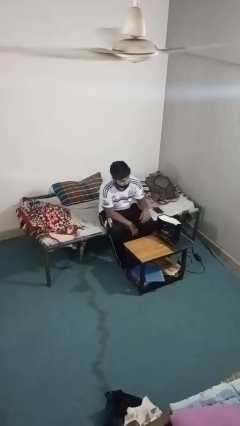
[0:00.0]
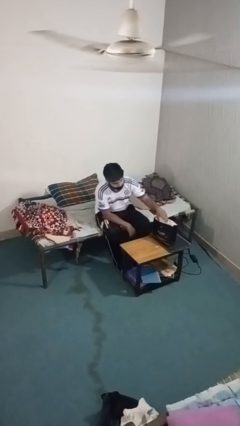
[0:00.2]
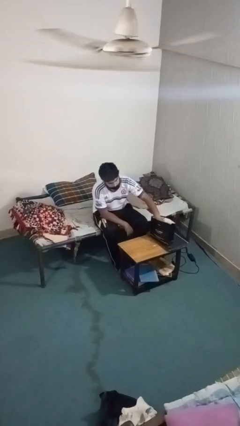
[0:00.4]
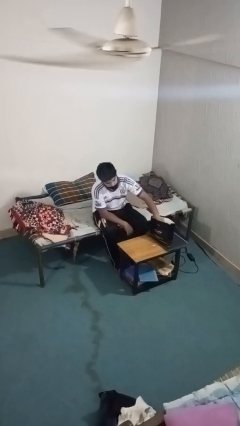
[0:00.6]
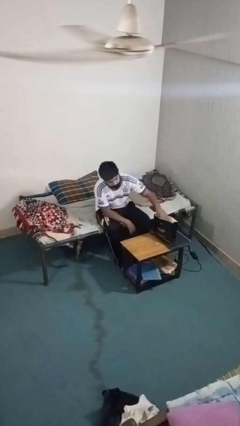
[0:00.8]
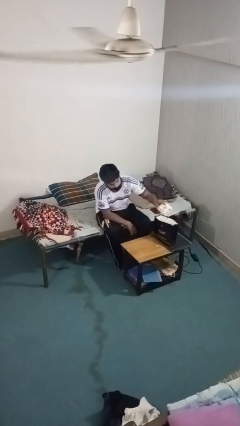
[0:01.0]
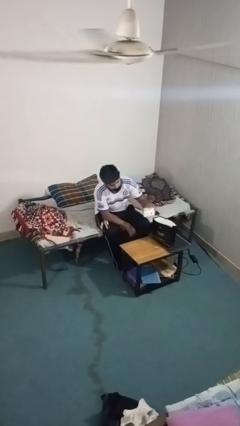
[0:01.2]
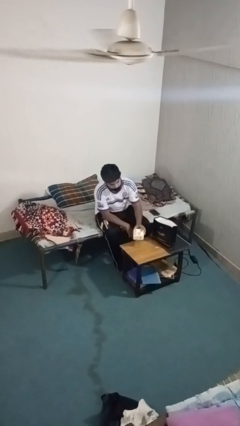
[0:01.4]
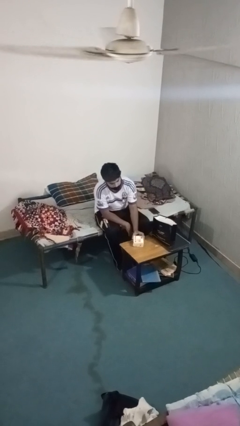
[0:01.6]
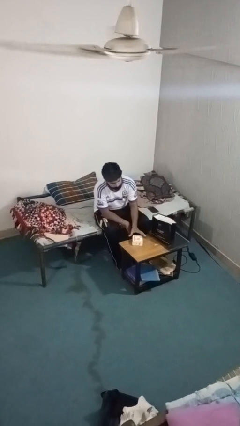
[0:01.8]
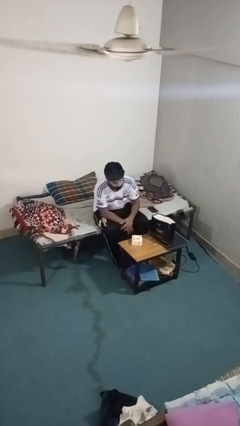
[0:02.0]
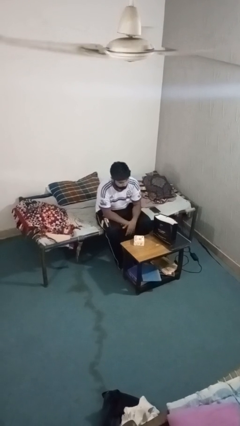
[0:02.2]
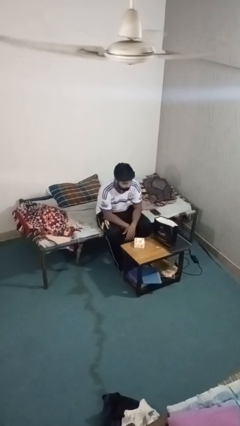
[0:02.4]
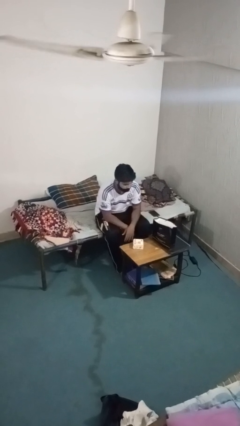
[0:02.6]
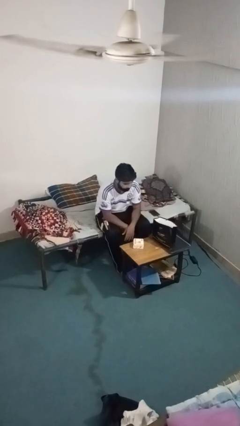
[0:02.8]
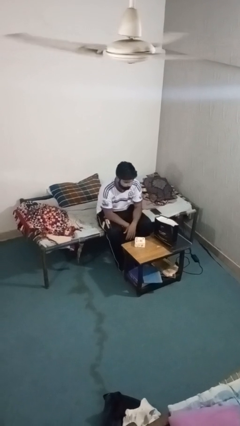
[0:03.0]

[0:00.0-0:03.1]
person takes object from bag

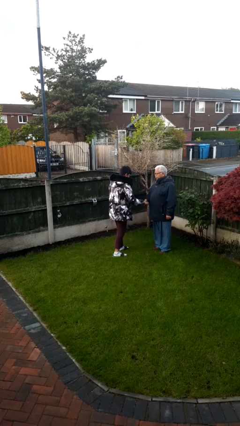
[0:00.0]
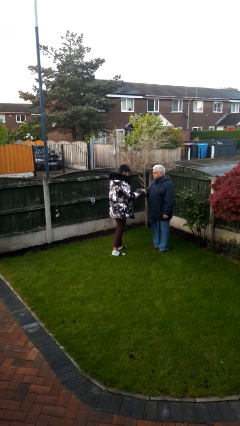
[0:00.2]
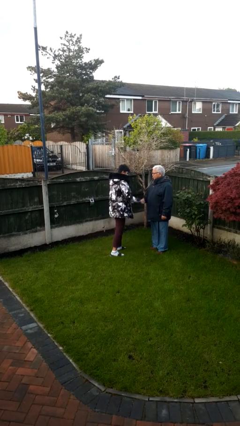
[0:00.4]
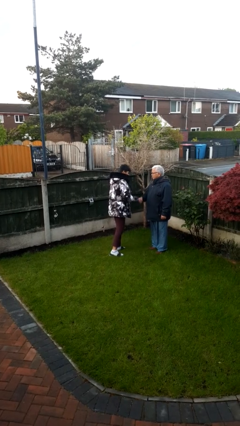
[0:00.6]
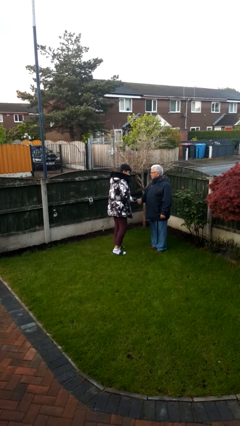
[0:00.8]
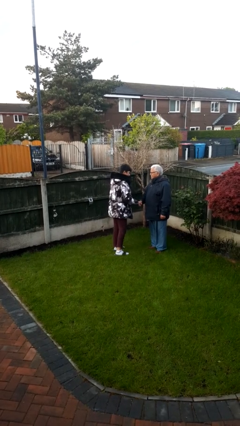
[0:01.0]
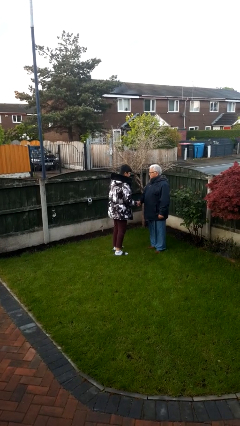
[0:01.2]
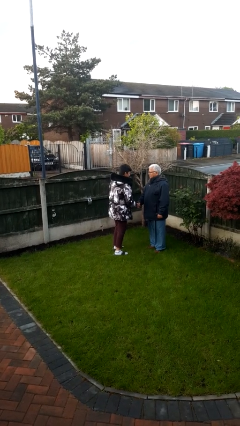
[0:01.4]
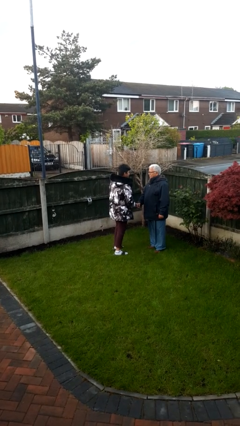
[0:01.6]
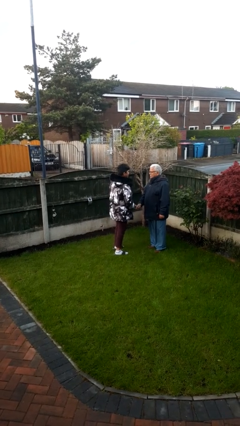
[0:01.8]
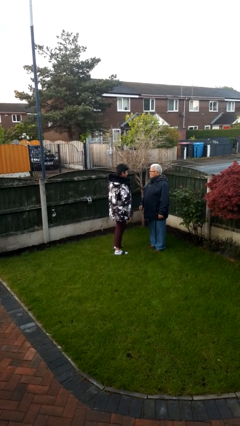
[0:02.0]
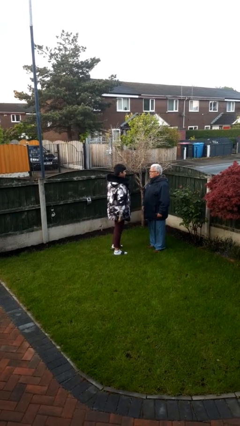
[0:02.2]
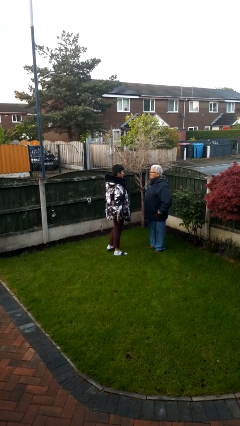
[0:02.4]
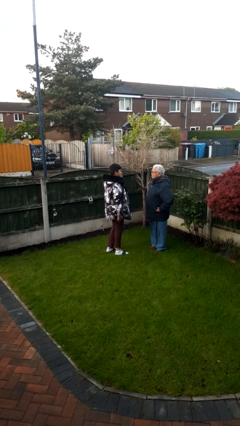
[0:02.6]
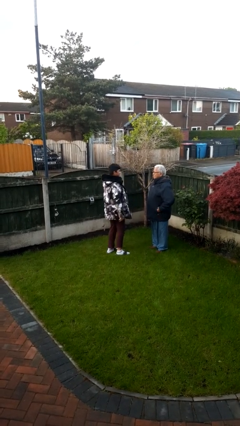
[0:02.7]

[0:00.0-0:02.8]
person highfives hand

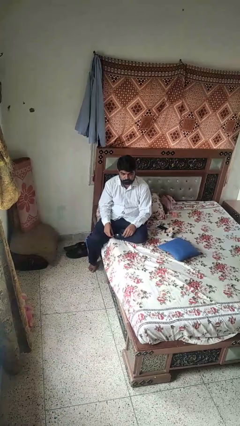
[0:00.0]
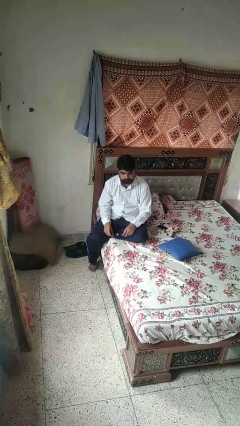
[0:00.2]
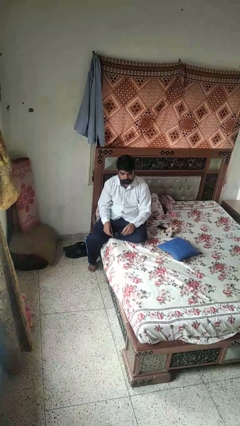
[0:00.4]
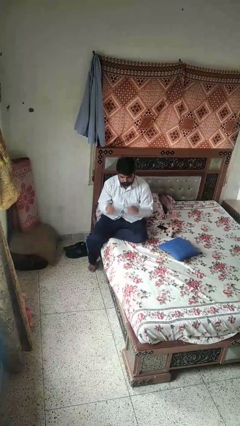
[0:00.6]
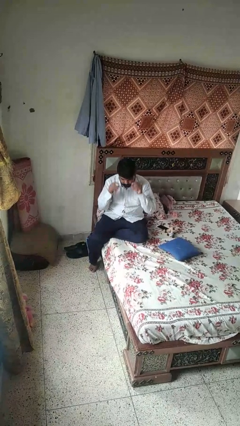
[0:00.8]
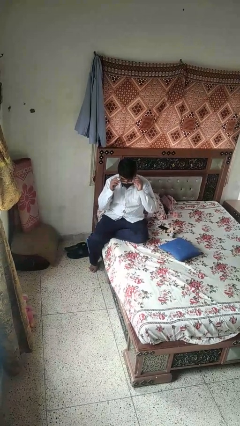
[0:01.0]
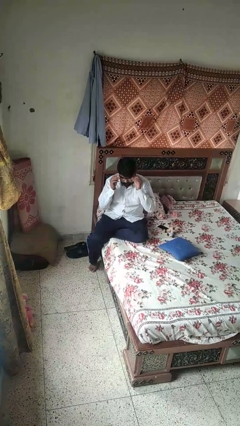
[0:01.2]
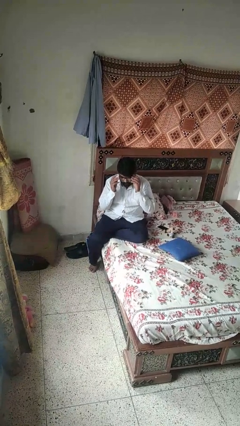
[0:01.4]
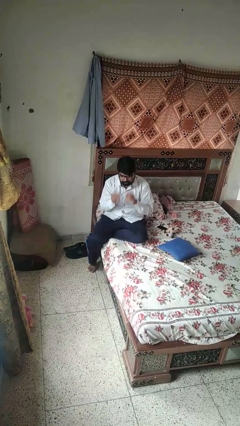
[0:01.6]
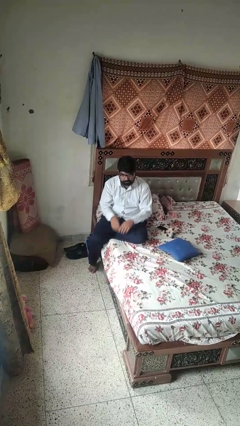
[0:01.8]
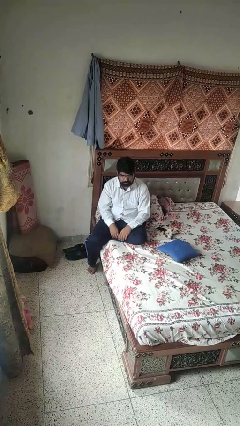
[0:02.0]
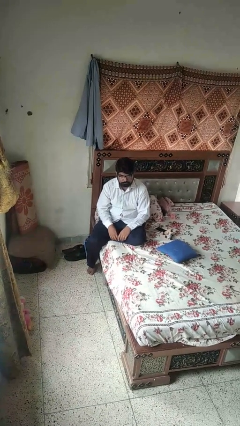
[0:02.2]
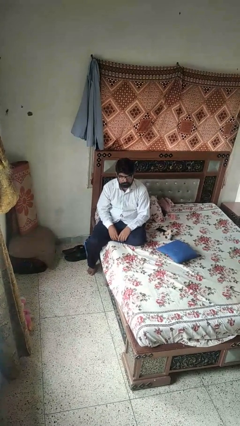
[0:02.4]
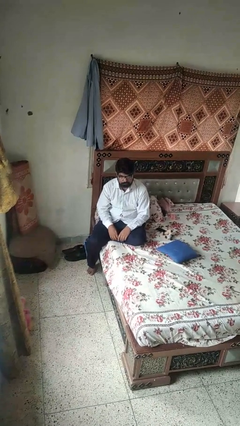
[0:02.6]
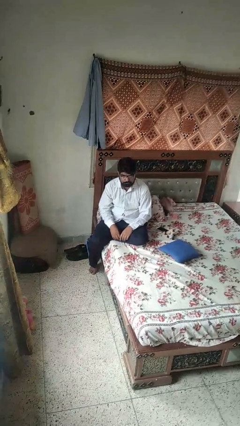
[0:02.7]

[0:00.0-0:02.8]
person puts on glasses

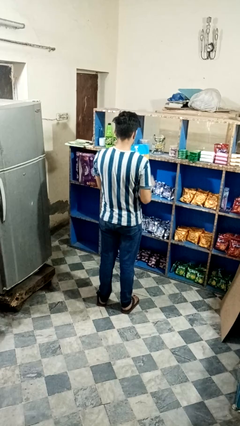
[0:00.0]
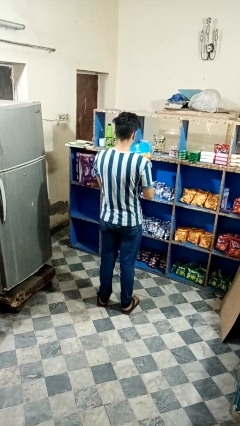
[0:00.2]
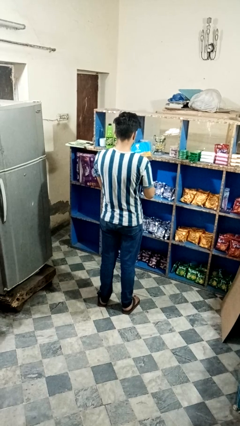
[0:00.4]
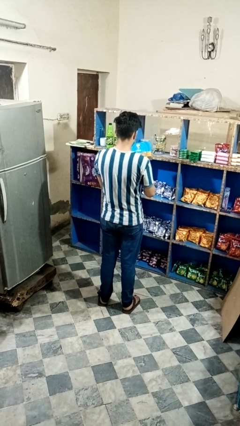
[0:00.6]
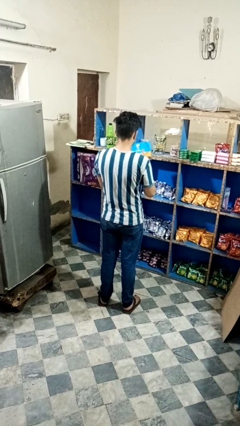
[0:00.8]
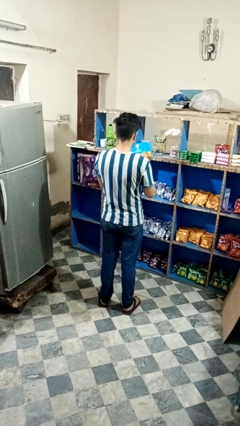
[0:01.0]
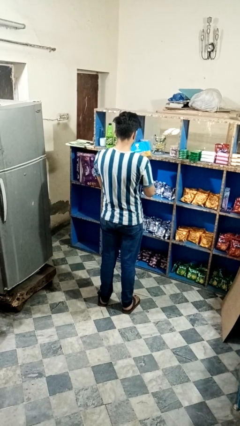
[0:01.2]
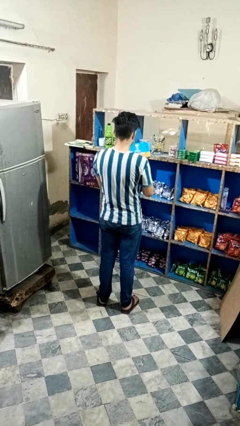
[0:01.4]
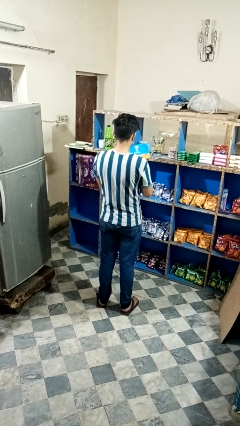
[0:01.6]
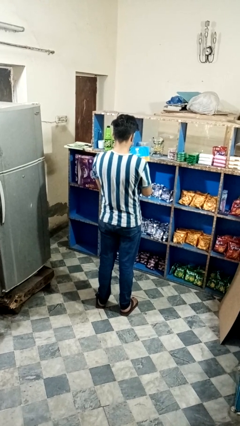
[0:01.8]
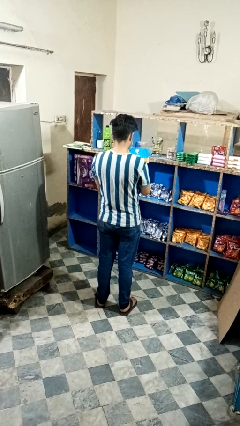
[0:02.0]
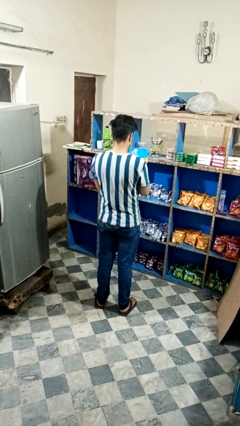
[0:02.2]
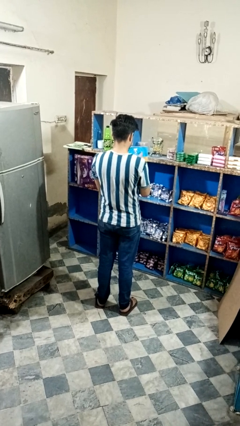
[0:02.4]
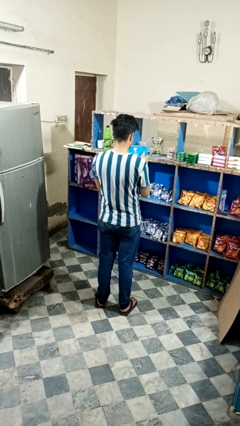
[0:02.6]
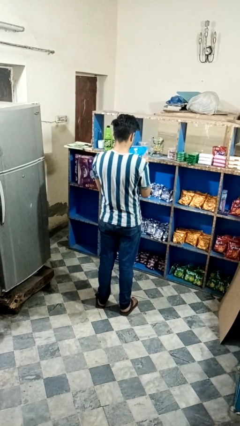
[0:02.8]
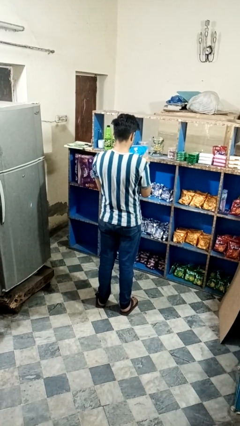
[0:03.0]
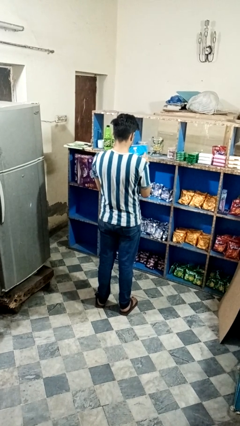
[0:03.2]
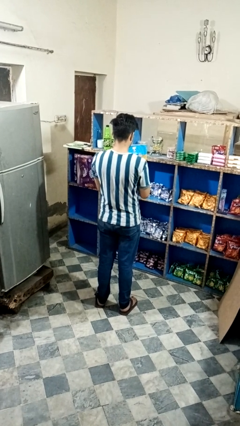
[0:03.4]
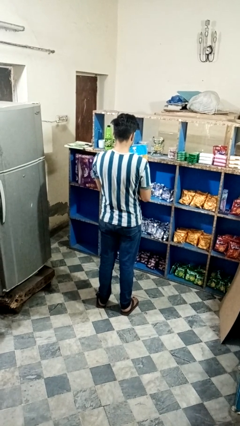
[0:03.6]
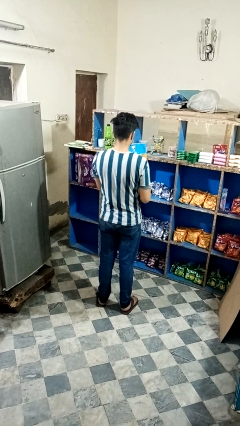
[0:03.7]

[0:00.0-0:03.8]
person taps object with finger

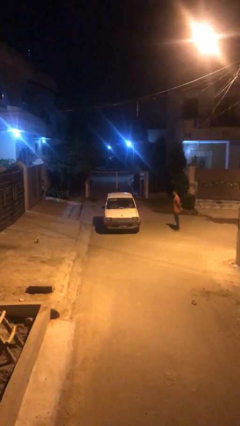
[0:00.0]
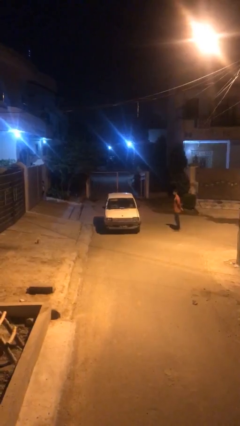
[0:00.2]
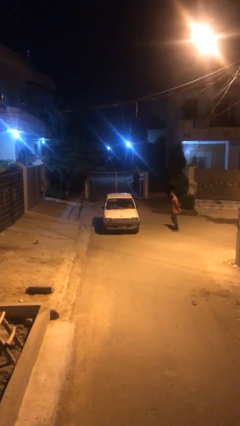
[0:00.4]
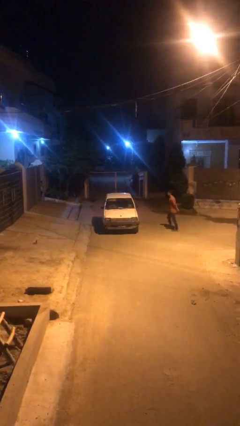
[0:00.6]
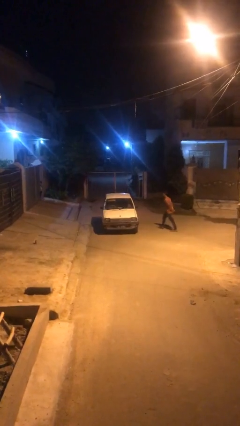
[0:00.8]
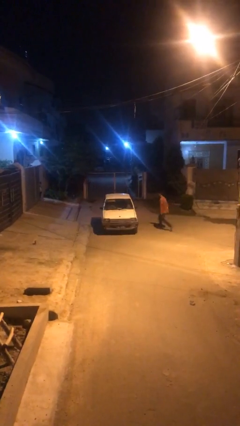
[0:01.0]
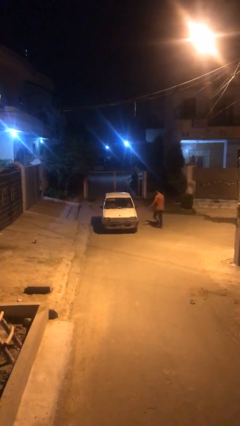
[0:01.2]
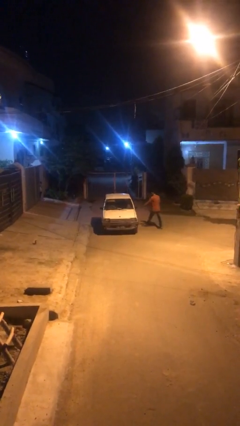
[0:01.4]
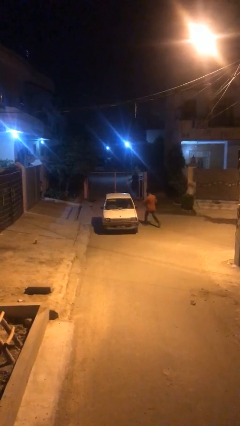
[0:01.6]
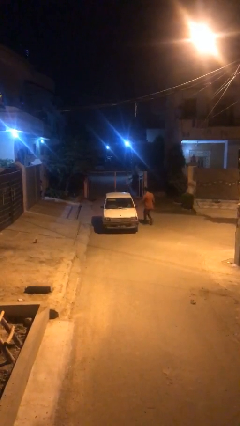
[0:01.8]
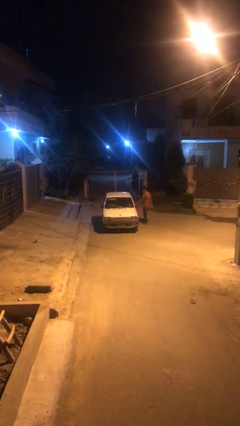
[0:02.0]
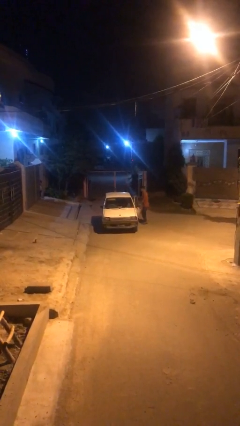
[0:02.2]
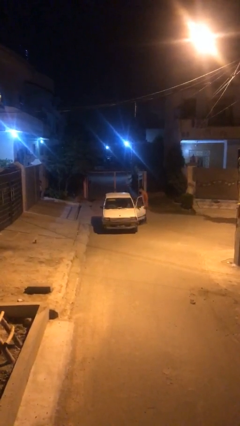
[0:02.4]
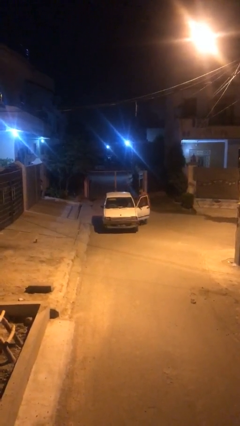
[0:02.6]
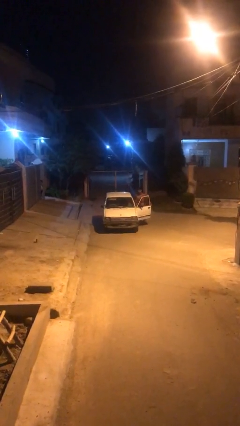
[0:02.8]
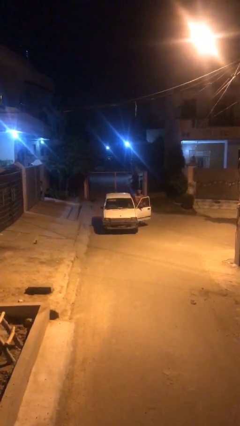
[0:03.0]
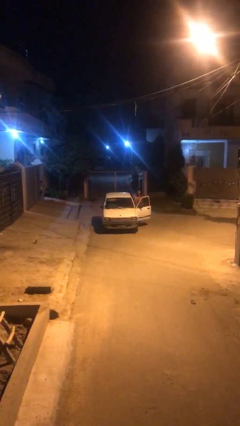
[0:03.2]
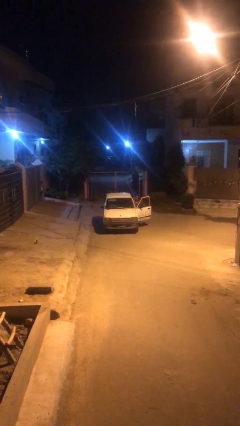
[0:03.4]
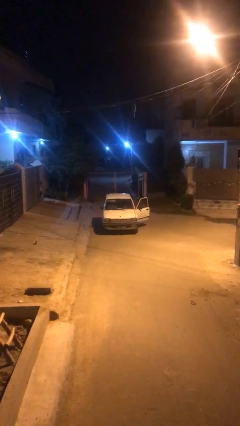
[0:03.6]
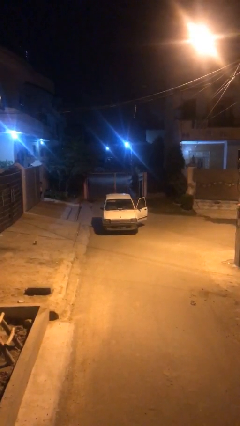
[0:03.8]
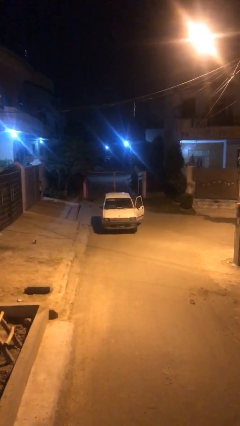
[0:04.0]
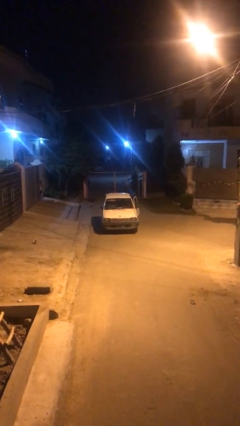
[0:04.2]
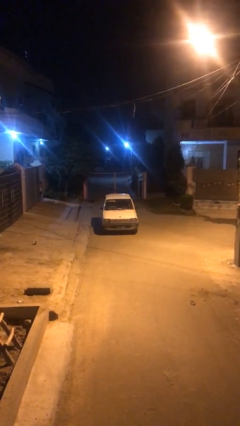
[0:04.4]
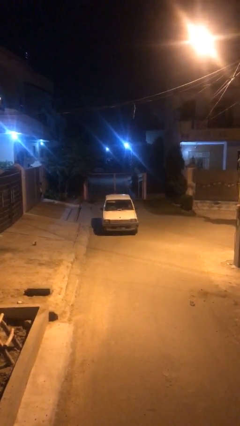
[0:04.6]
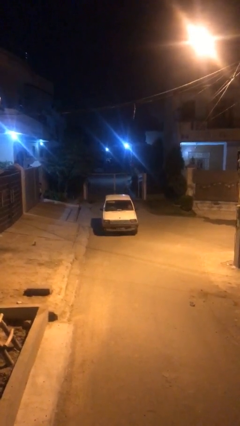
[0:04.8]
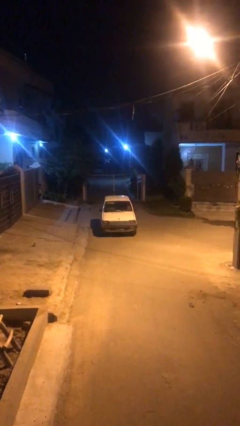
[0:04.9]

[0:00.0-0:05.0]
car picks up person
